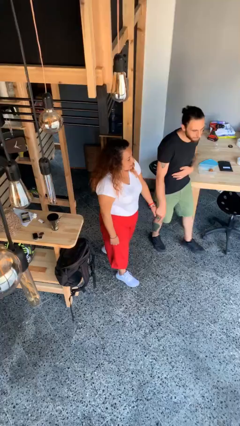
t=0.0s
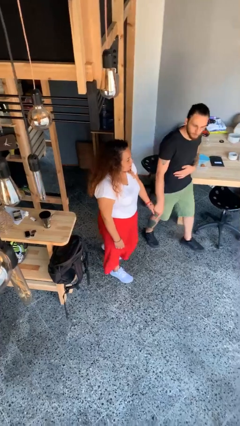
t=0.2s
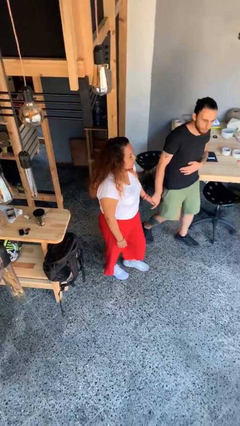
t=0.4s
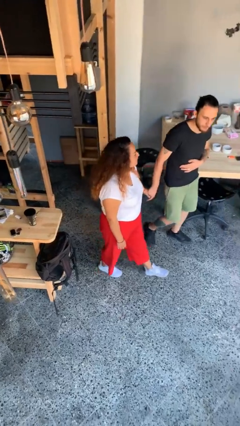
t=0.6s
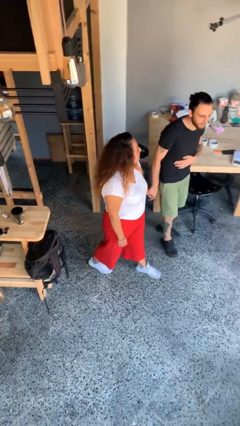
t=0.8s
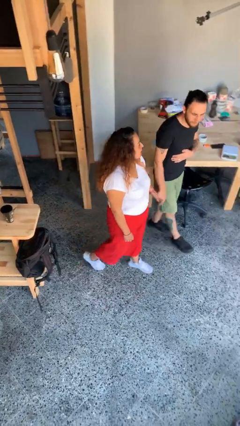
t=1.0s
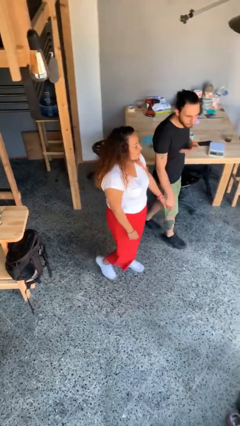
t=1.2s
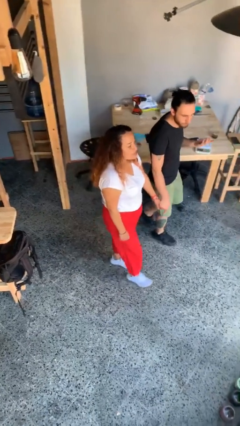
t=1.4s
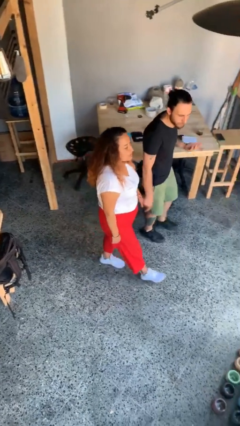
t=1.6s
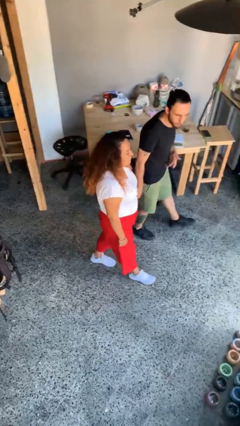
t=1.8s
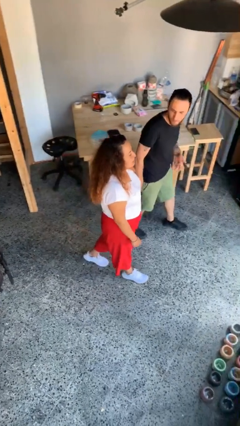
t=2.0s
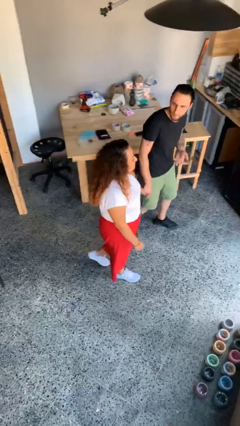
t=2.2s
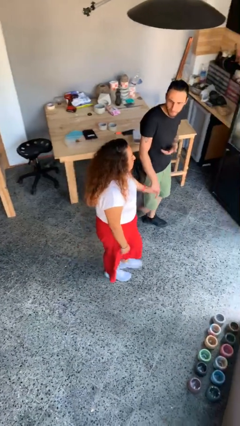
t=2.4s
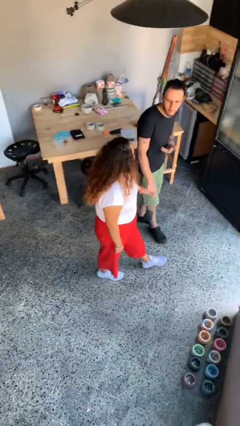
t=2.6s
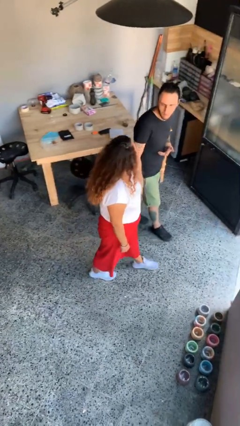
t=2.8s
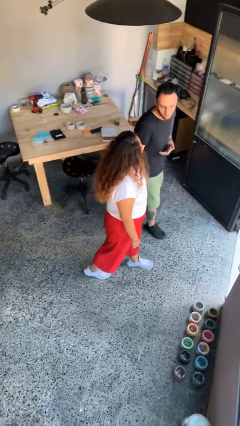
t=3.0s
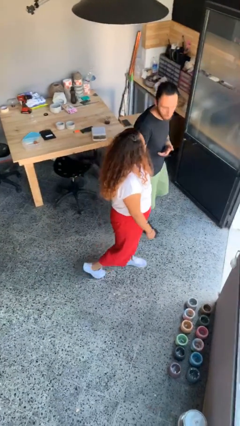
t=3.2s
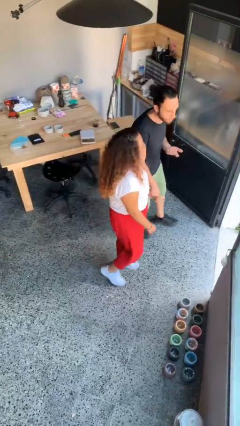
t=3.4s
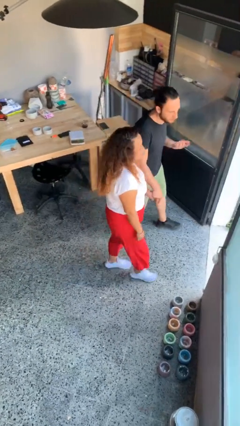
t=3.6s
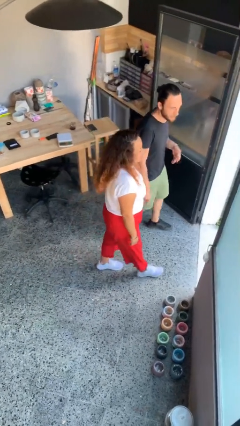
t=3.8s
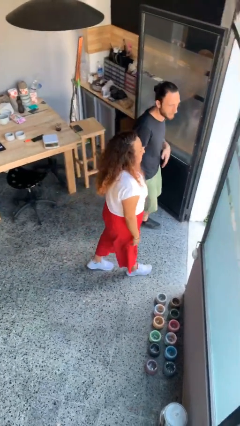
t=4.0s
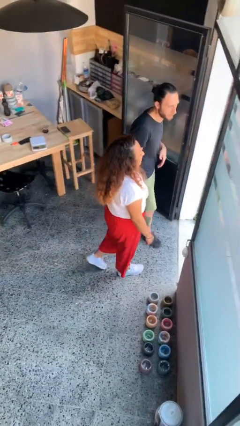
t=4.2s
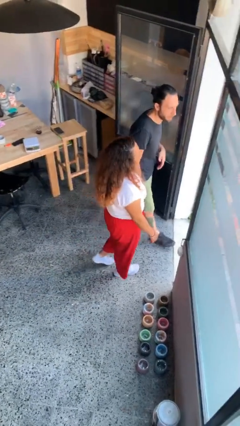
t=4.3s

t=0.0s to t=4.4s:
person holds hand

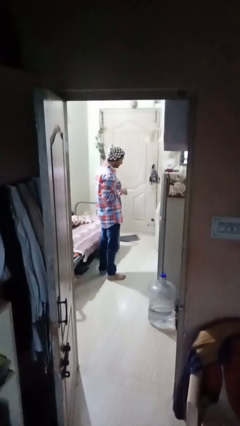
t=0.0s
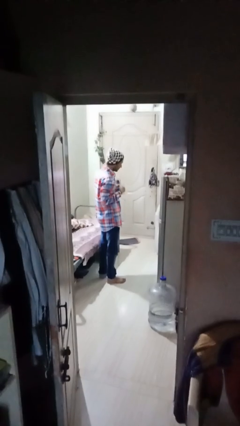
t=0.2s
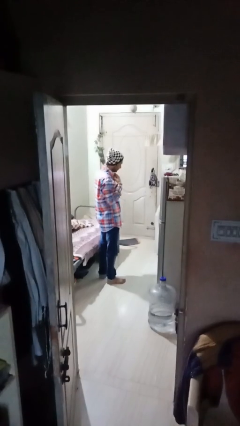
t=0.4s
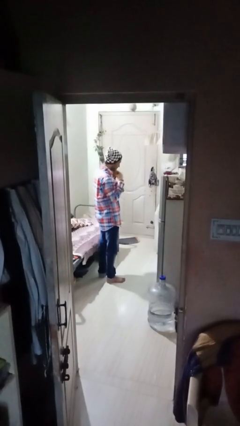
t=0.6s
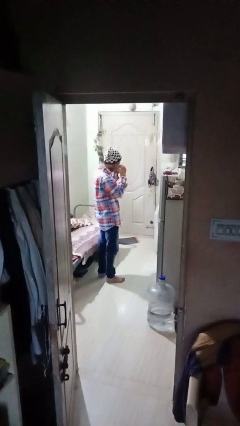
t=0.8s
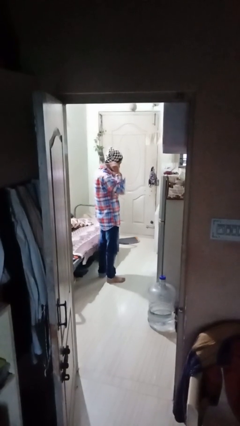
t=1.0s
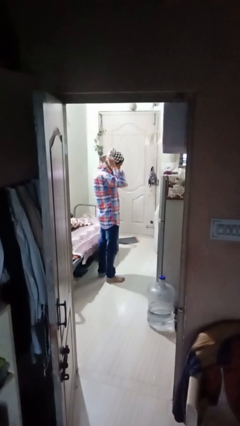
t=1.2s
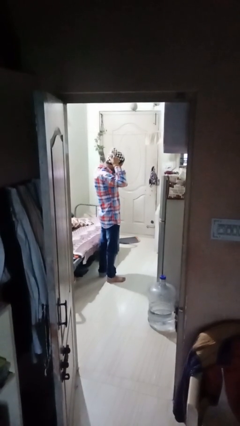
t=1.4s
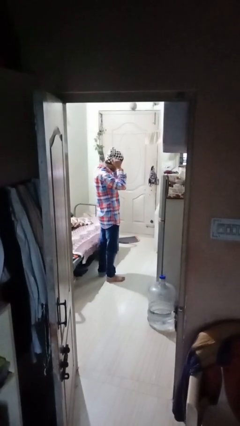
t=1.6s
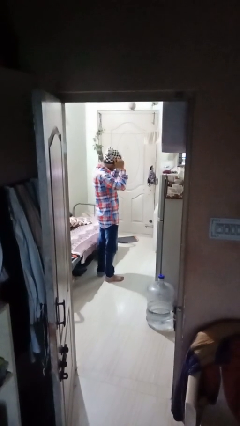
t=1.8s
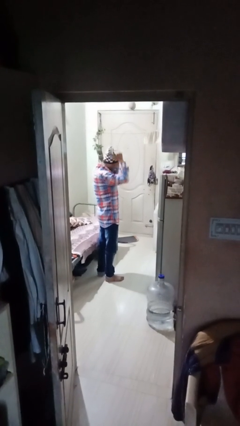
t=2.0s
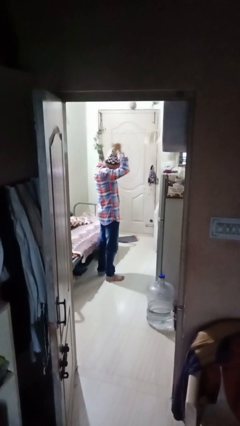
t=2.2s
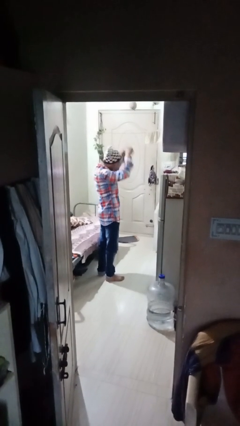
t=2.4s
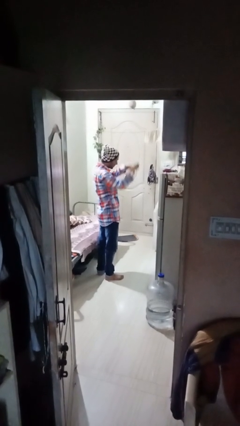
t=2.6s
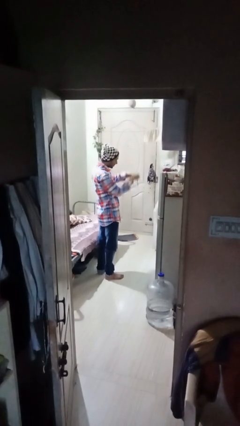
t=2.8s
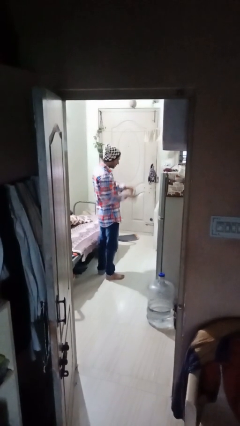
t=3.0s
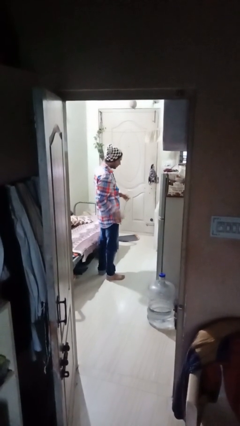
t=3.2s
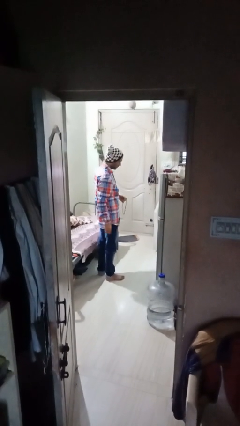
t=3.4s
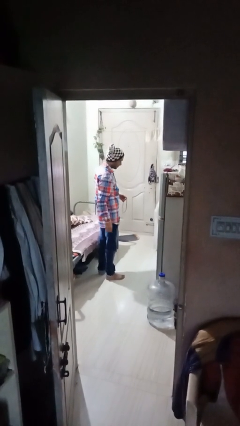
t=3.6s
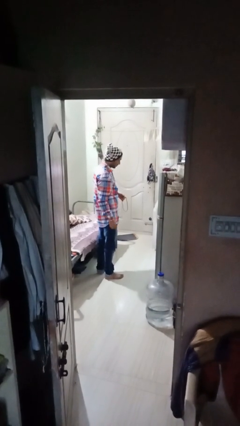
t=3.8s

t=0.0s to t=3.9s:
person takes off necklace

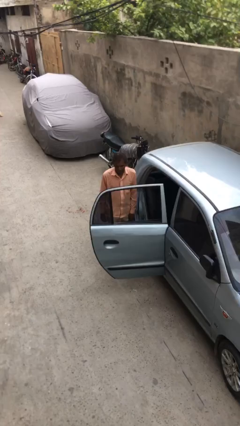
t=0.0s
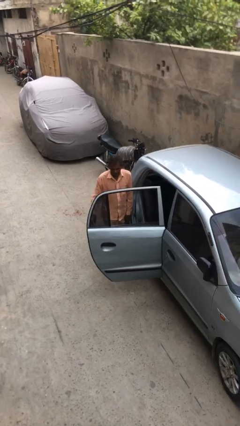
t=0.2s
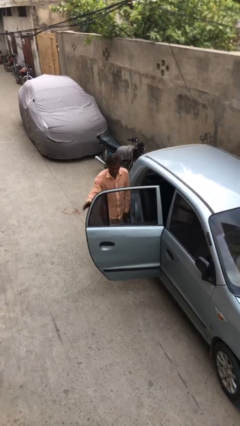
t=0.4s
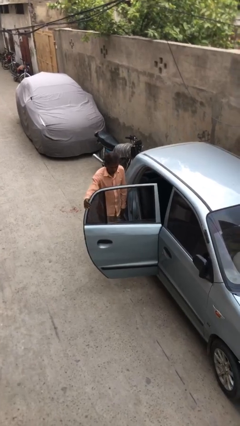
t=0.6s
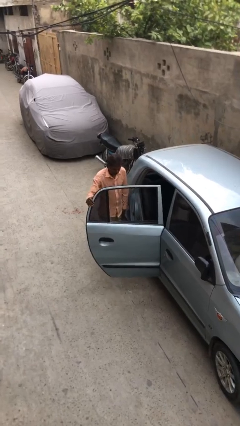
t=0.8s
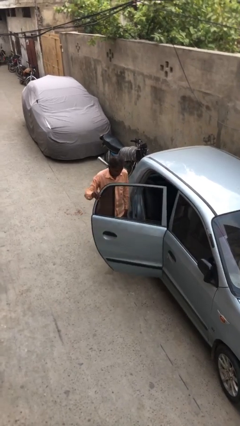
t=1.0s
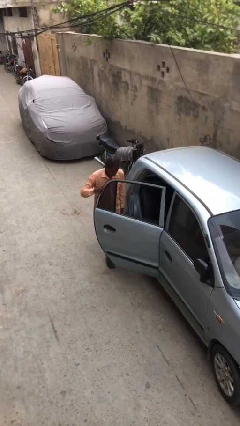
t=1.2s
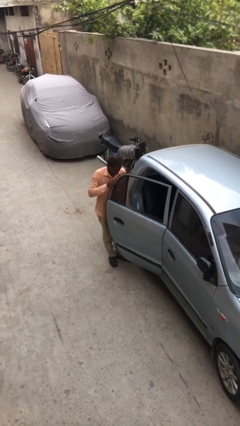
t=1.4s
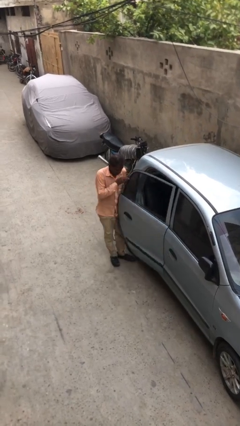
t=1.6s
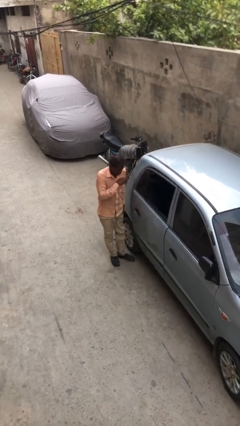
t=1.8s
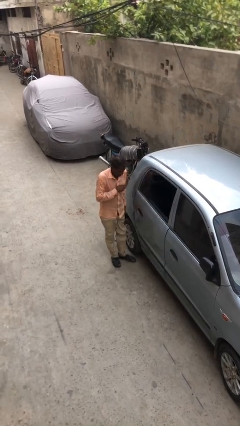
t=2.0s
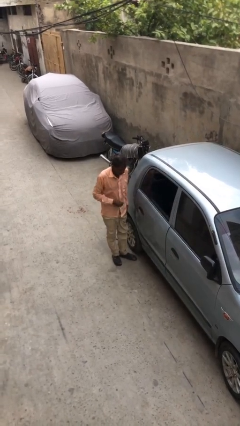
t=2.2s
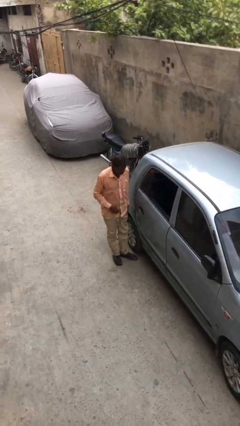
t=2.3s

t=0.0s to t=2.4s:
person closes car door

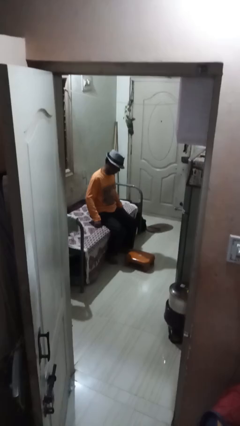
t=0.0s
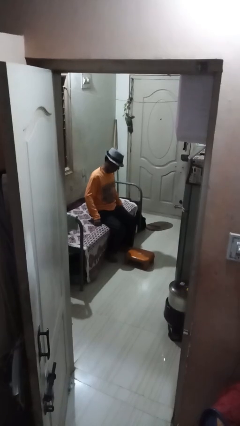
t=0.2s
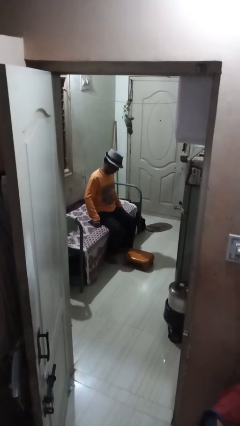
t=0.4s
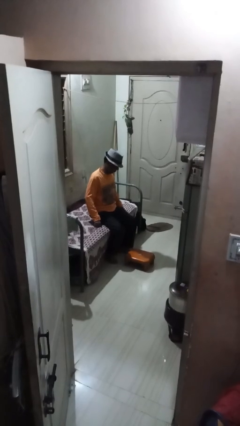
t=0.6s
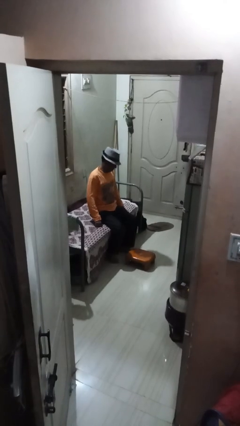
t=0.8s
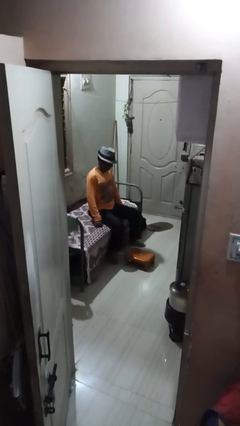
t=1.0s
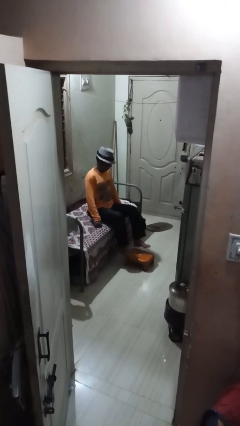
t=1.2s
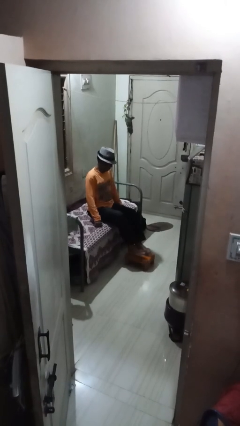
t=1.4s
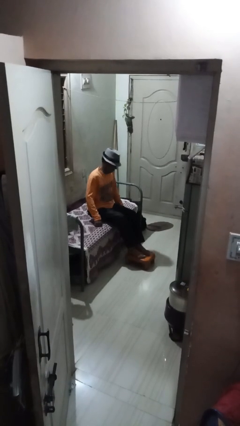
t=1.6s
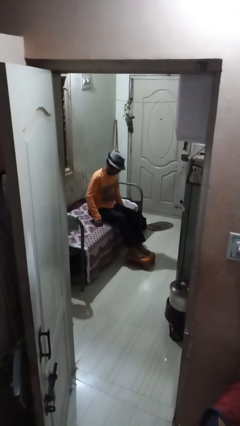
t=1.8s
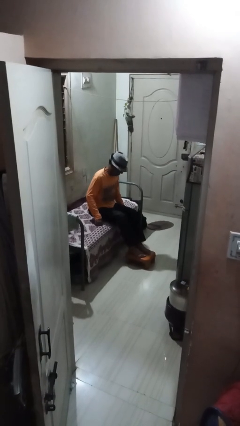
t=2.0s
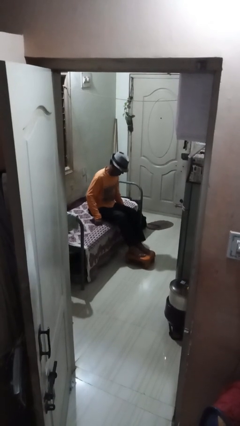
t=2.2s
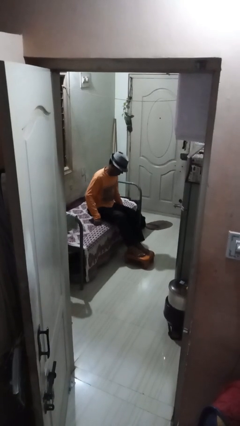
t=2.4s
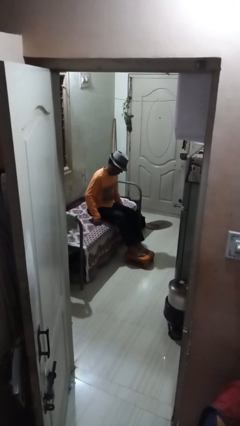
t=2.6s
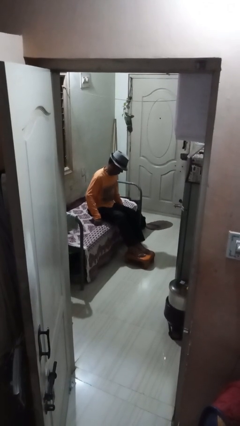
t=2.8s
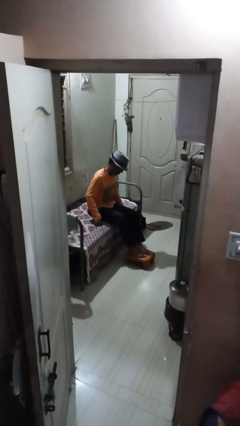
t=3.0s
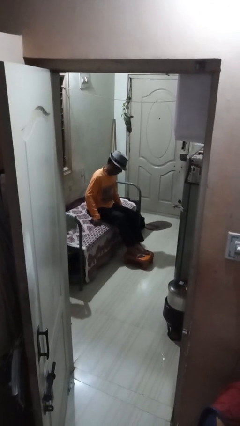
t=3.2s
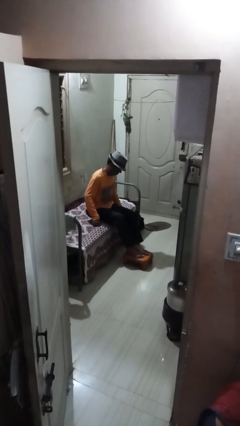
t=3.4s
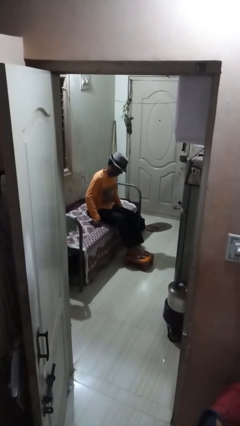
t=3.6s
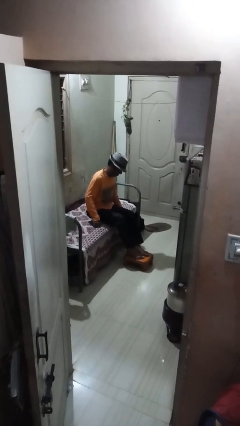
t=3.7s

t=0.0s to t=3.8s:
person puts feet up

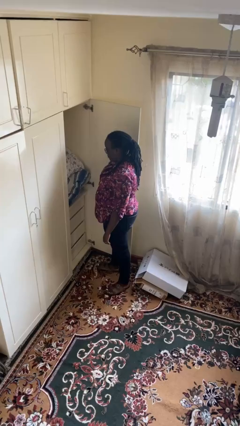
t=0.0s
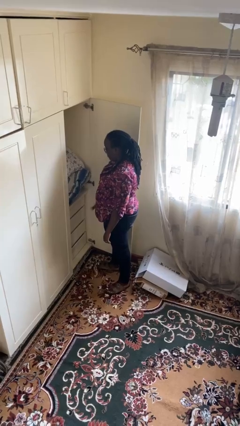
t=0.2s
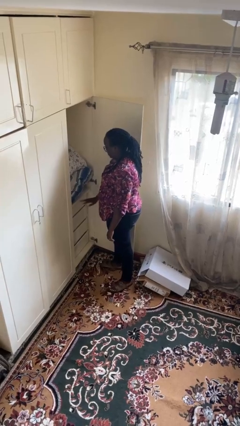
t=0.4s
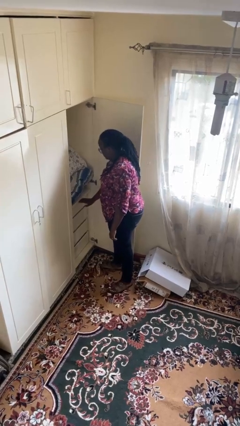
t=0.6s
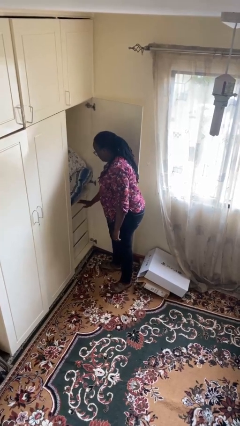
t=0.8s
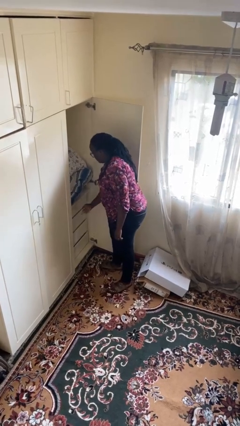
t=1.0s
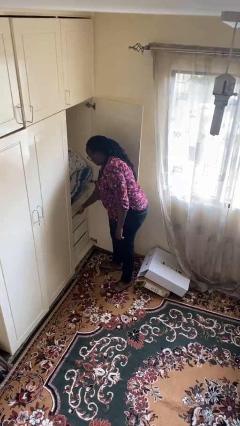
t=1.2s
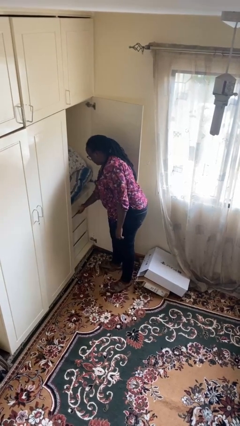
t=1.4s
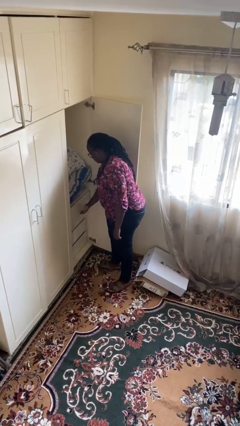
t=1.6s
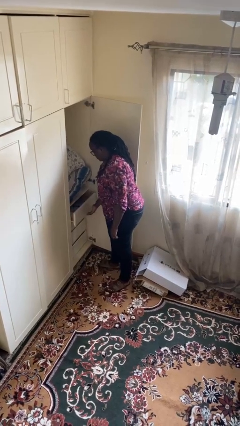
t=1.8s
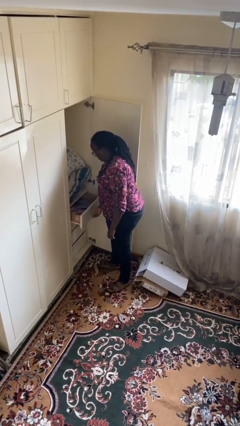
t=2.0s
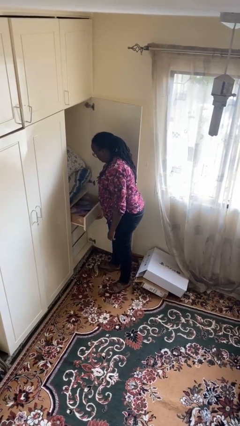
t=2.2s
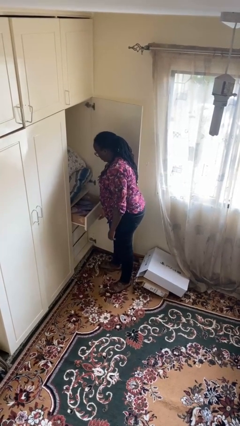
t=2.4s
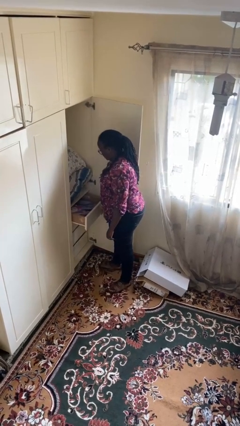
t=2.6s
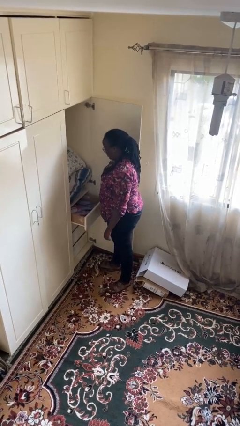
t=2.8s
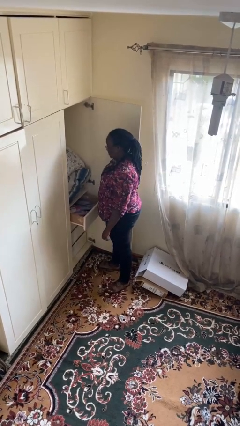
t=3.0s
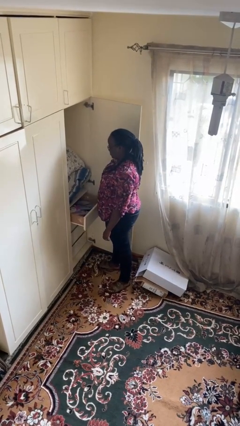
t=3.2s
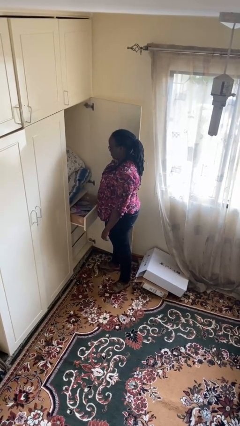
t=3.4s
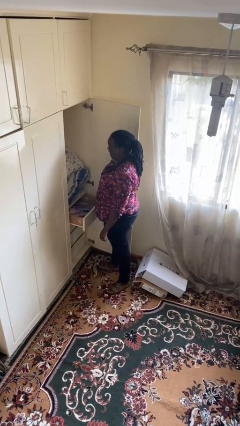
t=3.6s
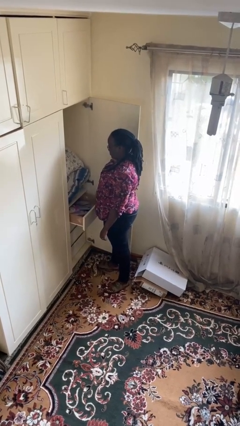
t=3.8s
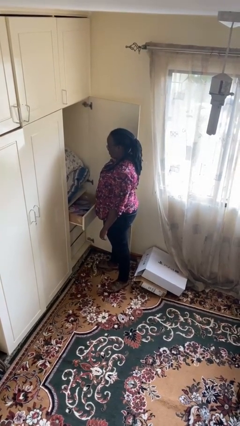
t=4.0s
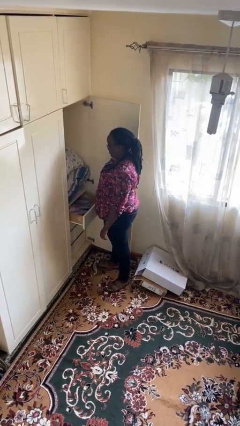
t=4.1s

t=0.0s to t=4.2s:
person opens dresser drawer
